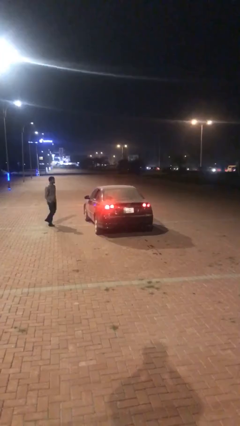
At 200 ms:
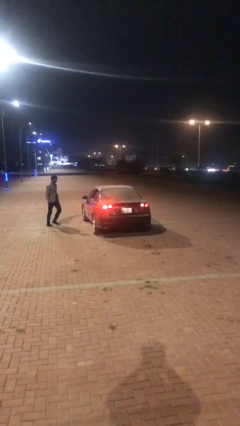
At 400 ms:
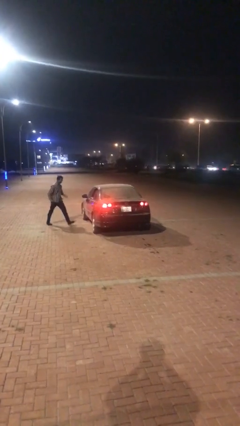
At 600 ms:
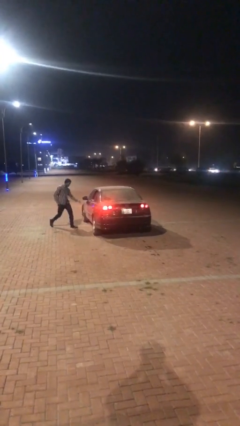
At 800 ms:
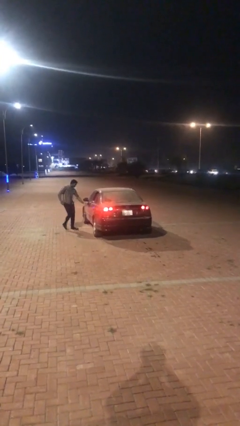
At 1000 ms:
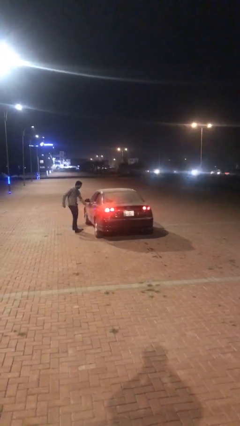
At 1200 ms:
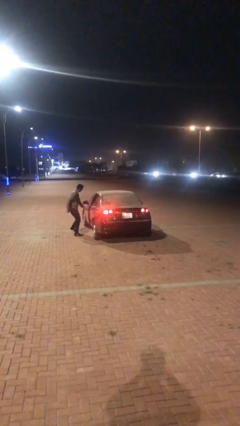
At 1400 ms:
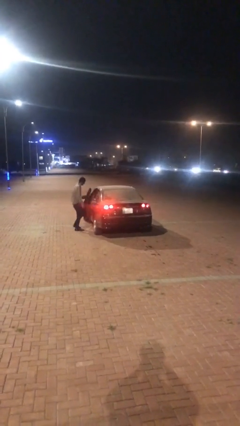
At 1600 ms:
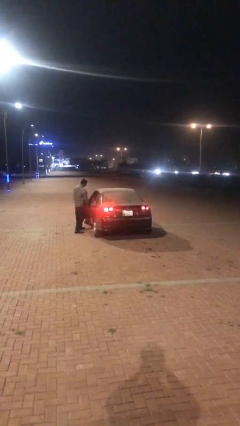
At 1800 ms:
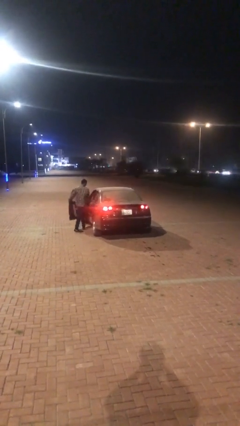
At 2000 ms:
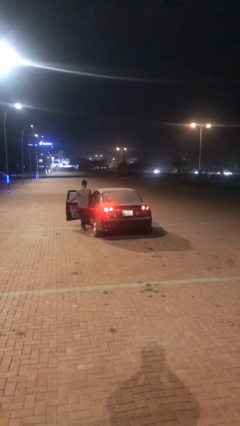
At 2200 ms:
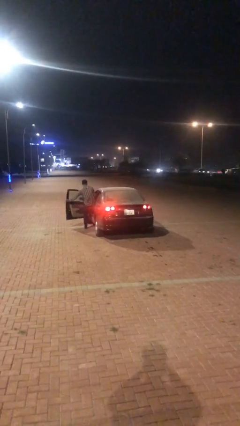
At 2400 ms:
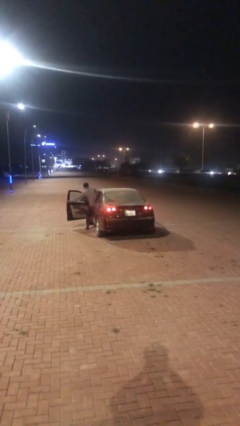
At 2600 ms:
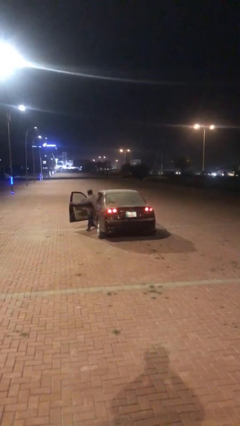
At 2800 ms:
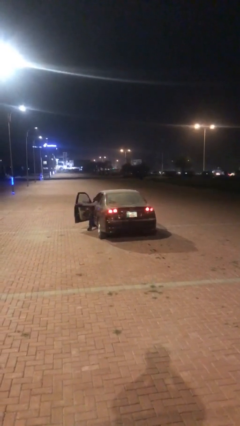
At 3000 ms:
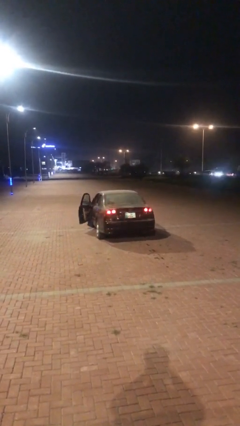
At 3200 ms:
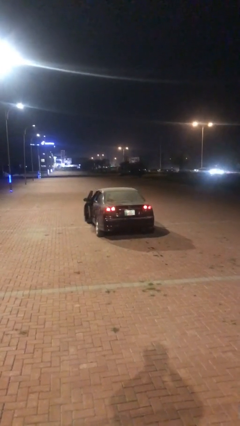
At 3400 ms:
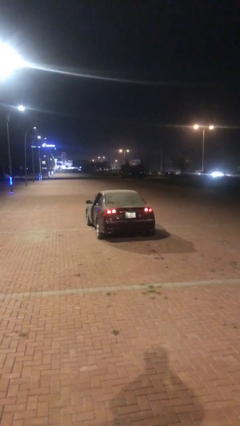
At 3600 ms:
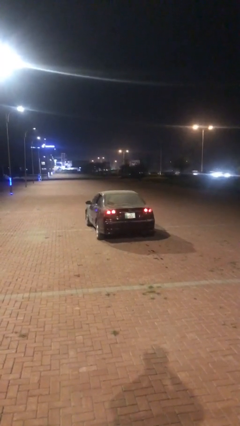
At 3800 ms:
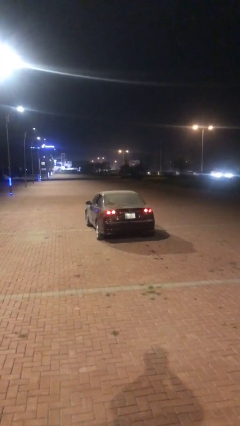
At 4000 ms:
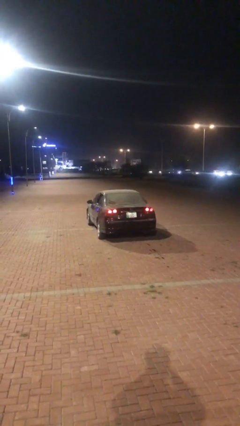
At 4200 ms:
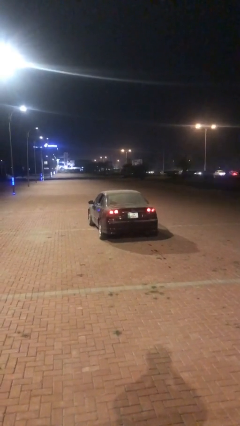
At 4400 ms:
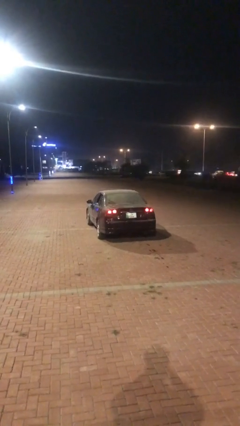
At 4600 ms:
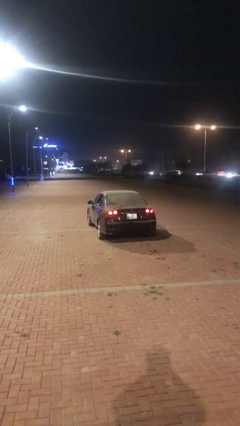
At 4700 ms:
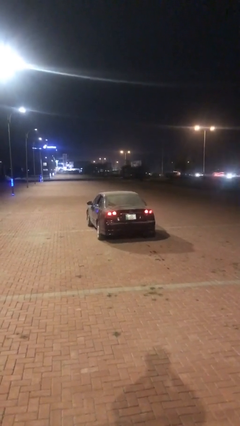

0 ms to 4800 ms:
car picks up person

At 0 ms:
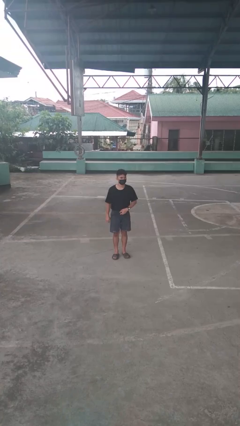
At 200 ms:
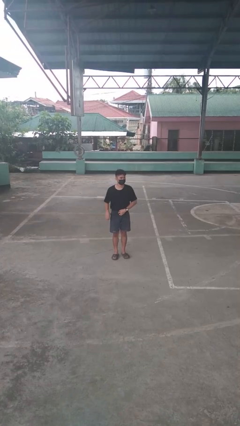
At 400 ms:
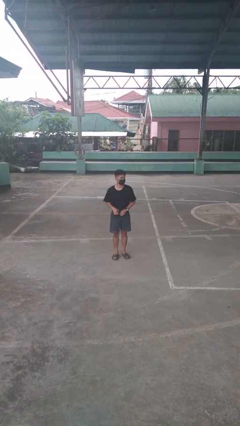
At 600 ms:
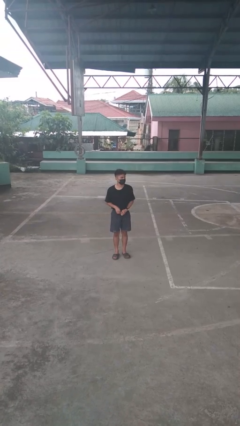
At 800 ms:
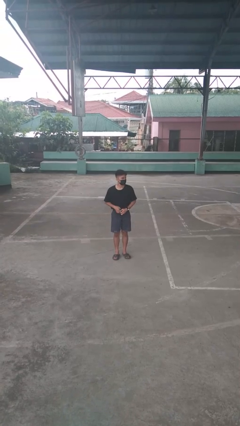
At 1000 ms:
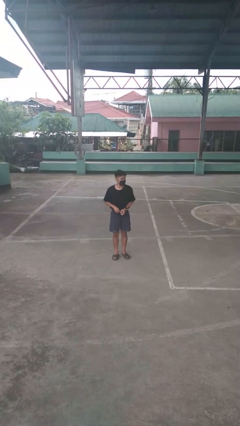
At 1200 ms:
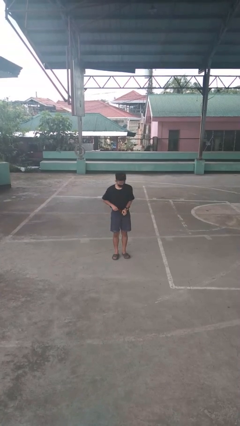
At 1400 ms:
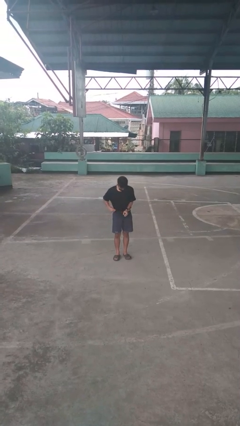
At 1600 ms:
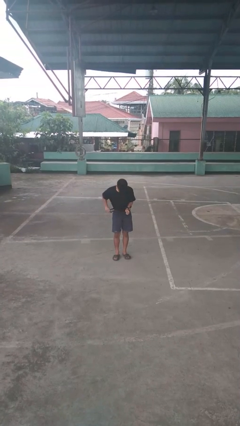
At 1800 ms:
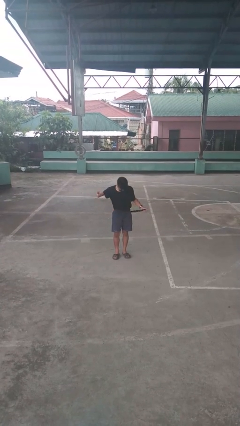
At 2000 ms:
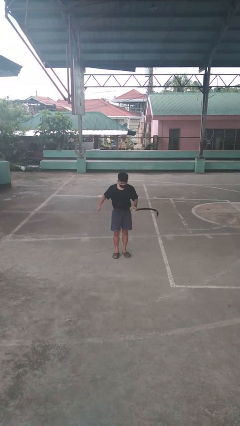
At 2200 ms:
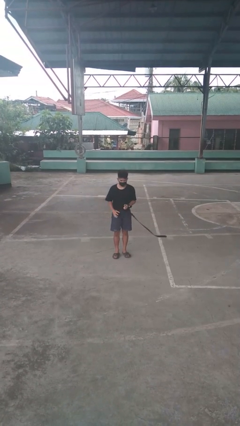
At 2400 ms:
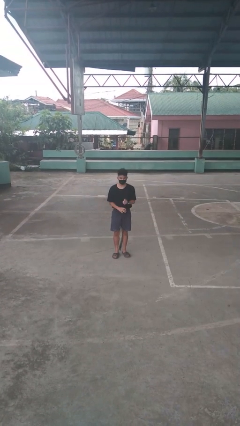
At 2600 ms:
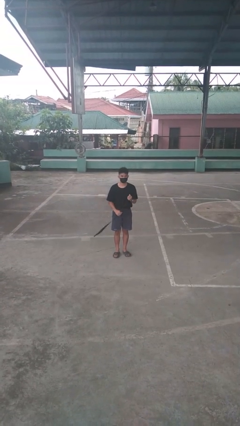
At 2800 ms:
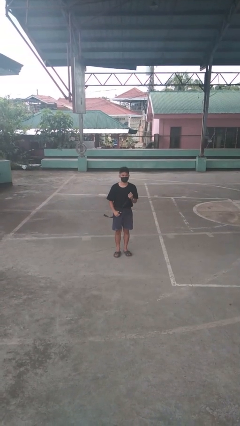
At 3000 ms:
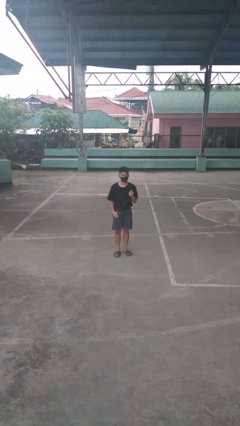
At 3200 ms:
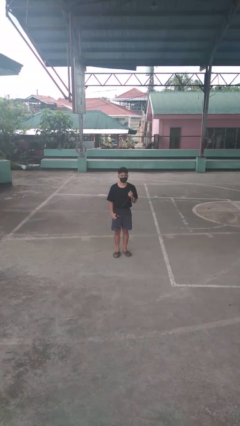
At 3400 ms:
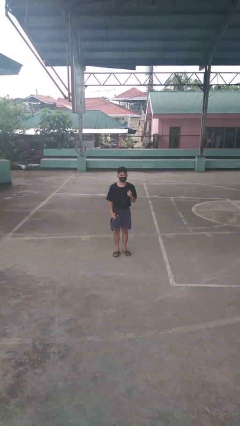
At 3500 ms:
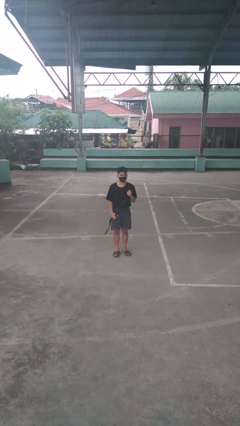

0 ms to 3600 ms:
person takes off belt

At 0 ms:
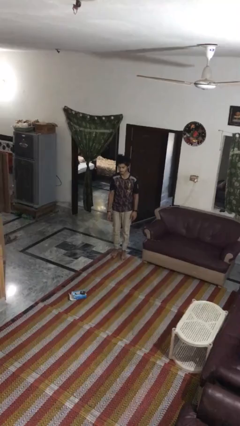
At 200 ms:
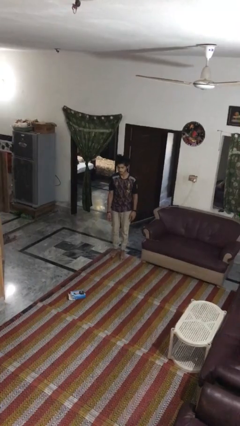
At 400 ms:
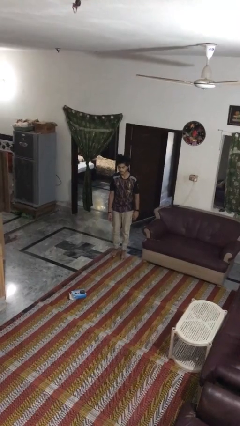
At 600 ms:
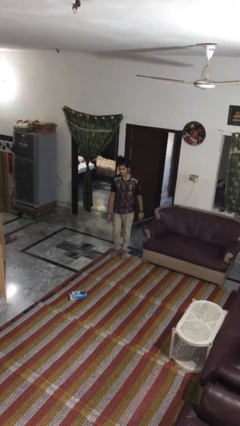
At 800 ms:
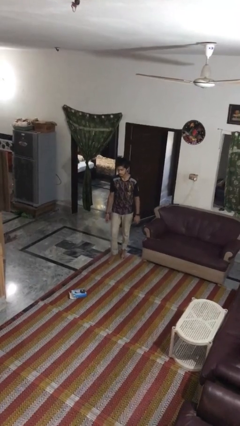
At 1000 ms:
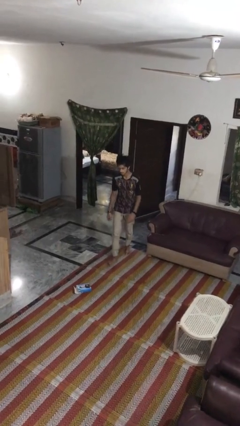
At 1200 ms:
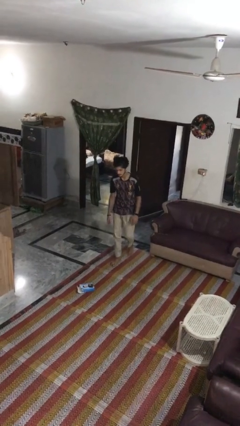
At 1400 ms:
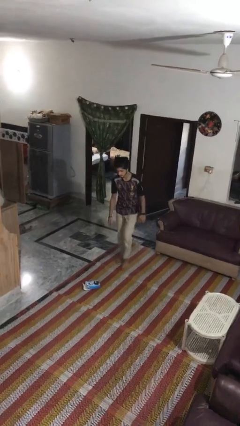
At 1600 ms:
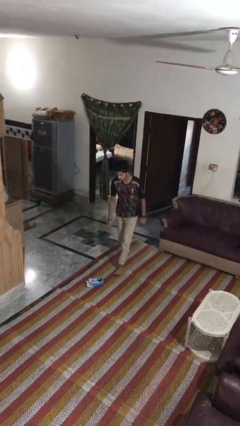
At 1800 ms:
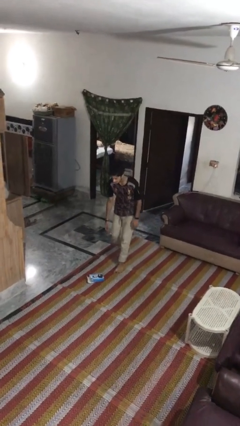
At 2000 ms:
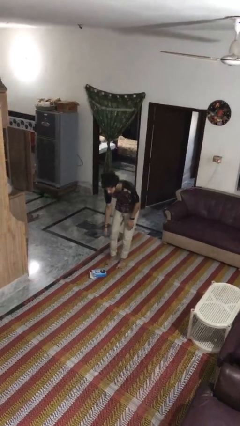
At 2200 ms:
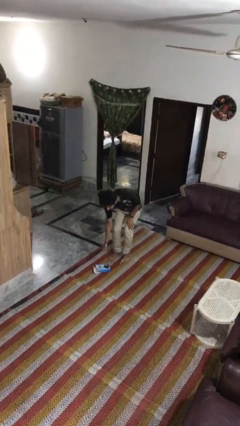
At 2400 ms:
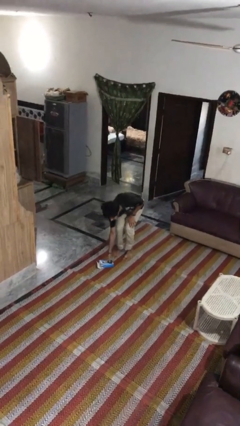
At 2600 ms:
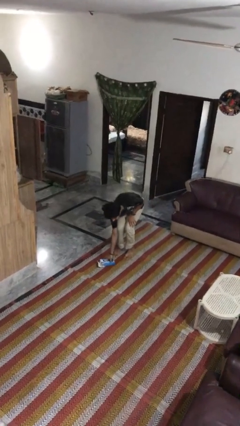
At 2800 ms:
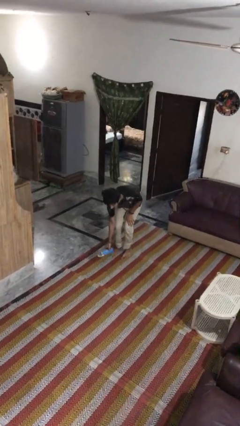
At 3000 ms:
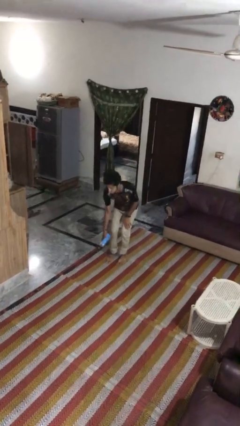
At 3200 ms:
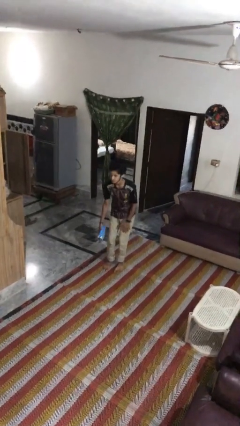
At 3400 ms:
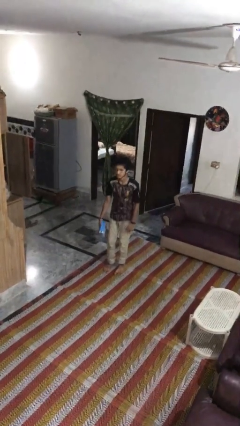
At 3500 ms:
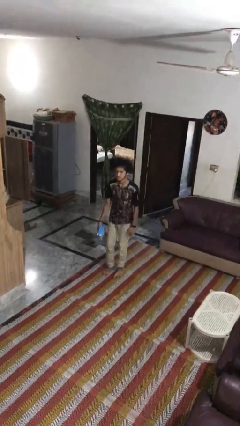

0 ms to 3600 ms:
person picks up object from floor

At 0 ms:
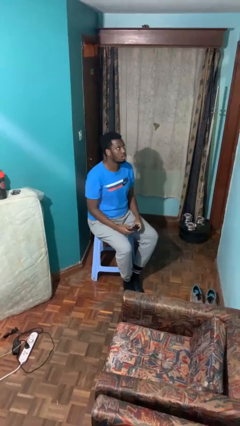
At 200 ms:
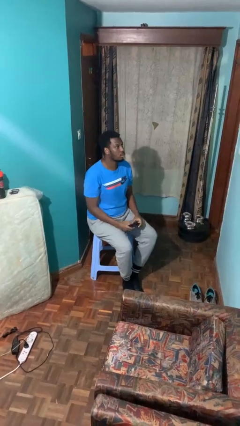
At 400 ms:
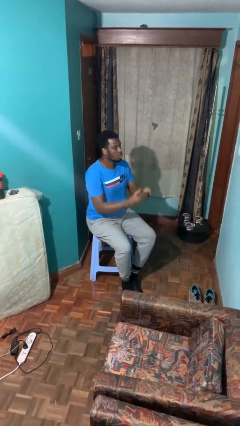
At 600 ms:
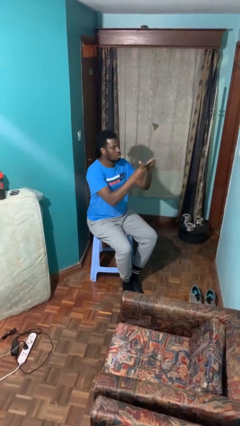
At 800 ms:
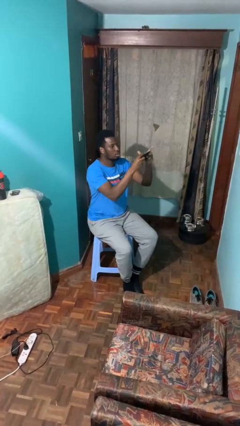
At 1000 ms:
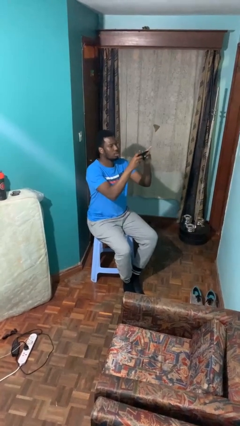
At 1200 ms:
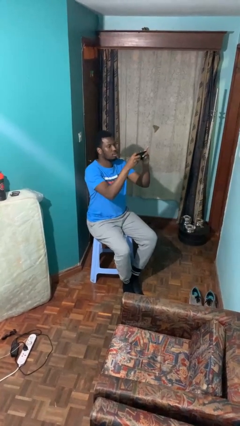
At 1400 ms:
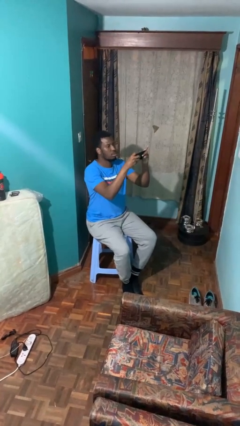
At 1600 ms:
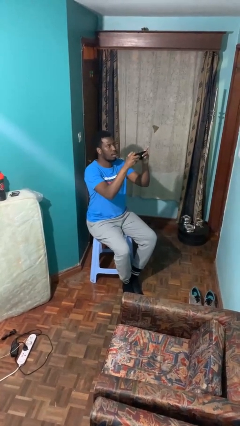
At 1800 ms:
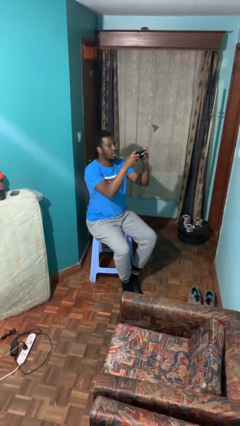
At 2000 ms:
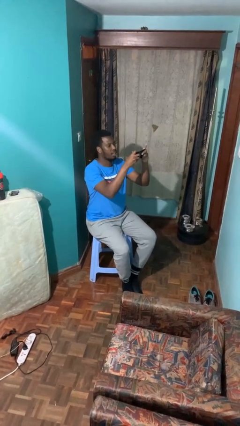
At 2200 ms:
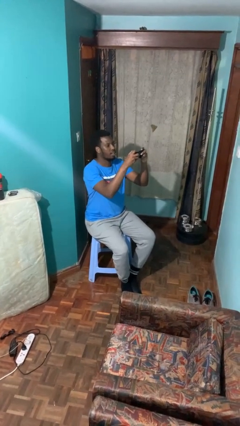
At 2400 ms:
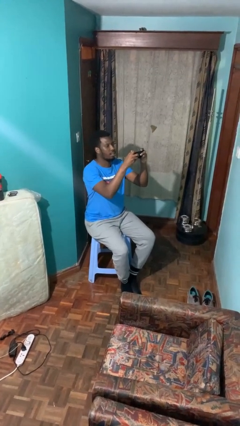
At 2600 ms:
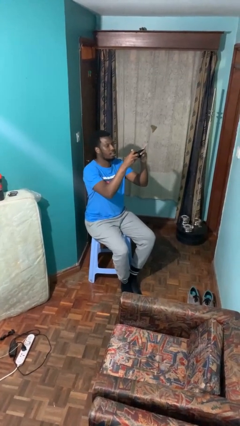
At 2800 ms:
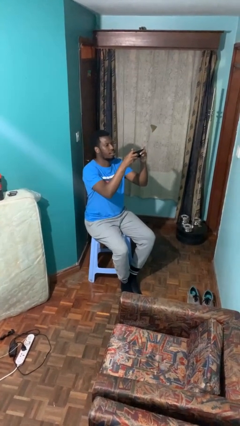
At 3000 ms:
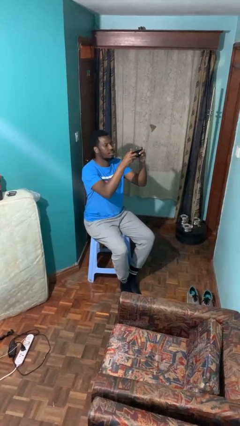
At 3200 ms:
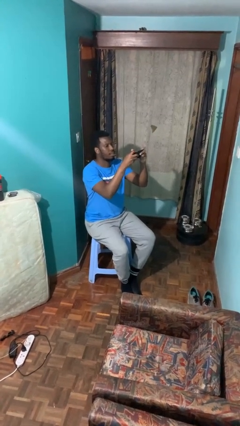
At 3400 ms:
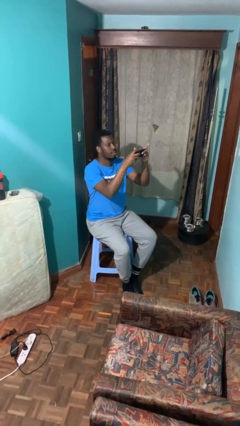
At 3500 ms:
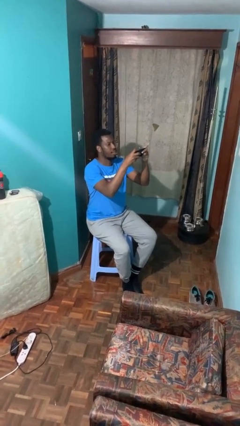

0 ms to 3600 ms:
person interacts with handheld game

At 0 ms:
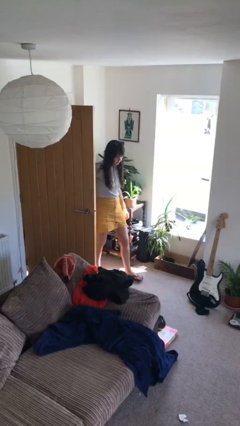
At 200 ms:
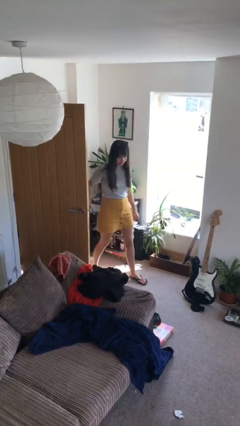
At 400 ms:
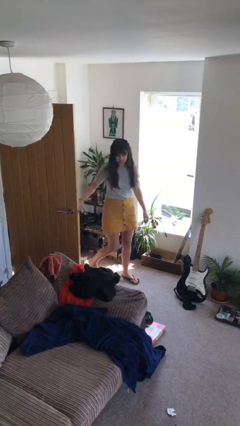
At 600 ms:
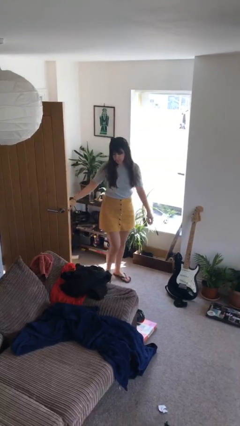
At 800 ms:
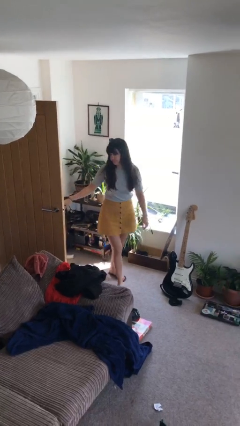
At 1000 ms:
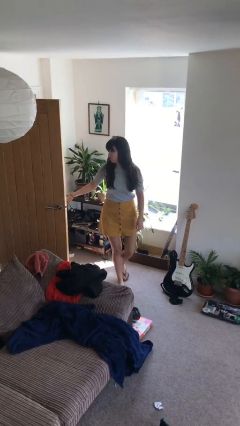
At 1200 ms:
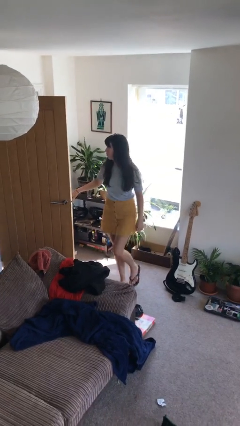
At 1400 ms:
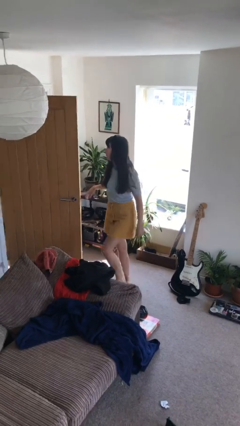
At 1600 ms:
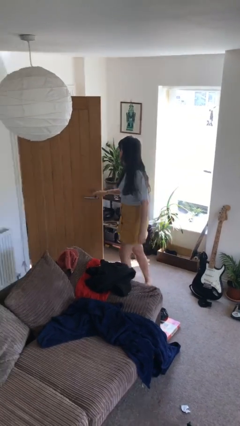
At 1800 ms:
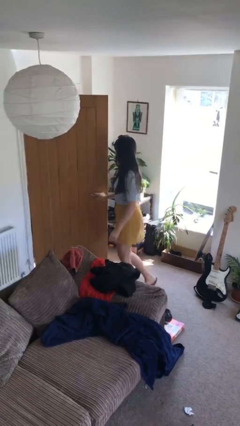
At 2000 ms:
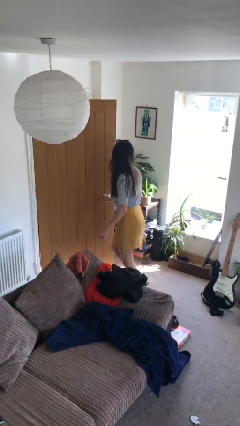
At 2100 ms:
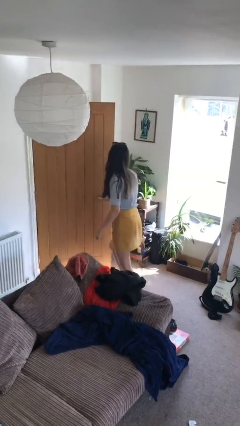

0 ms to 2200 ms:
person enters scene through structure
